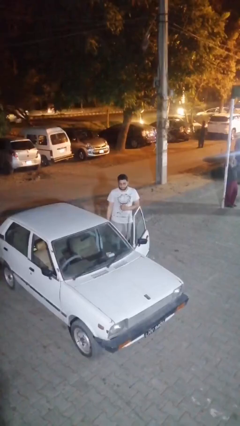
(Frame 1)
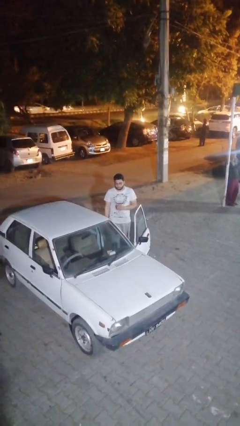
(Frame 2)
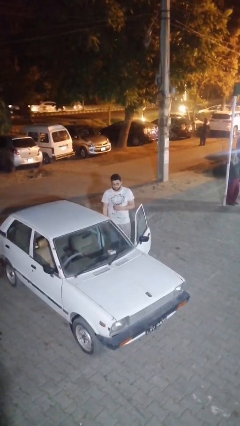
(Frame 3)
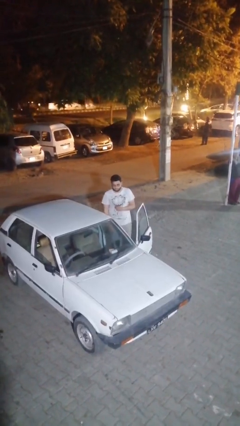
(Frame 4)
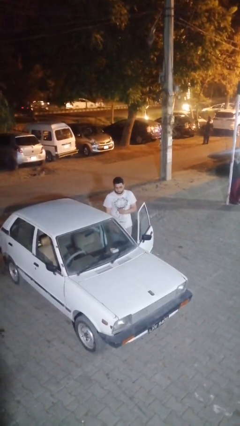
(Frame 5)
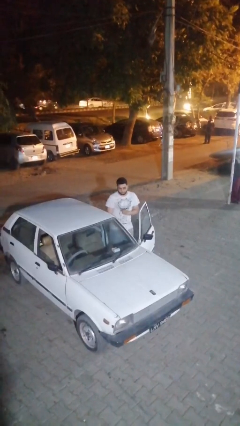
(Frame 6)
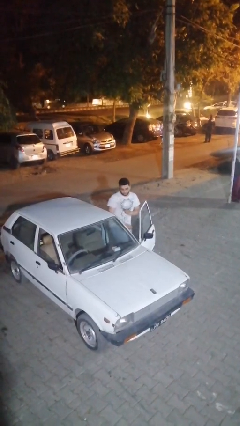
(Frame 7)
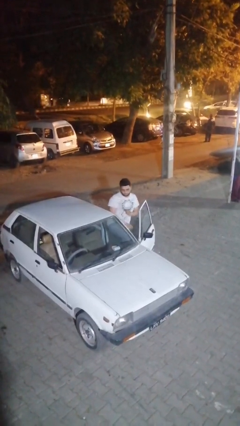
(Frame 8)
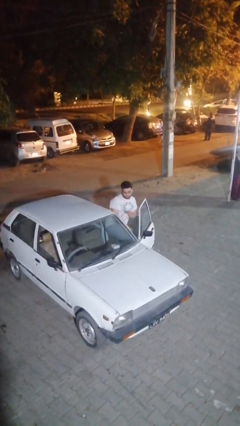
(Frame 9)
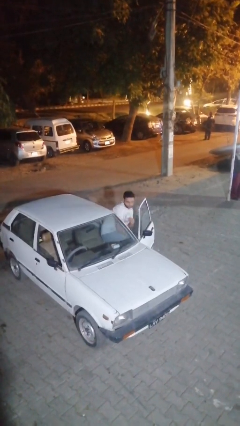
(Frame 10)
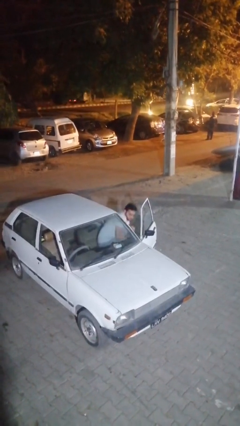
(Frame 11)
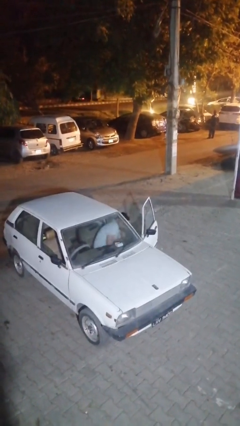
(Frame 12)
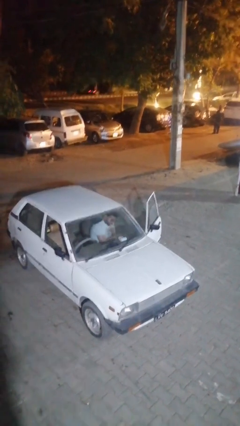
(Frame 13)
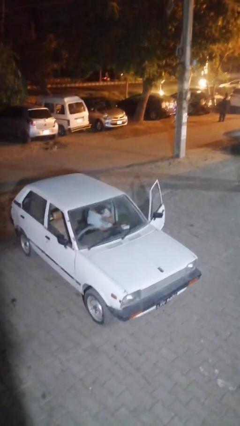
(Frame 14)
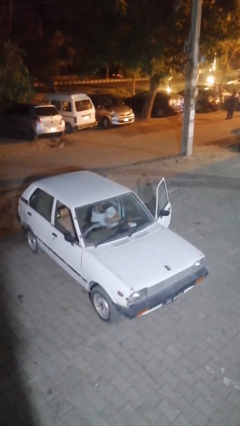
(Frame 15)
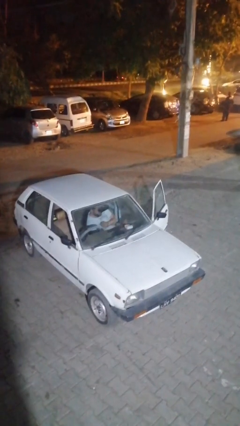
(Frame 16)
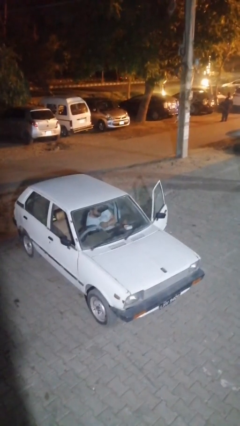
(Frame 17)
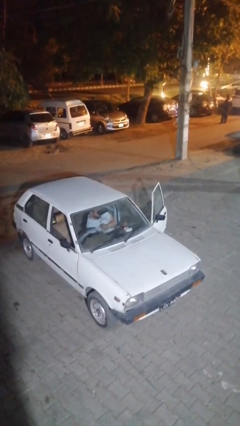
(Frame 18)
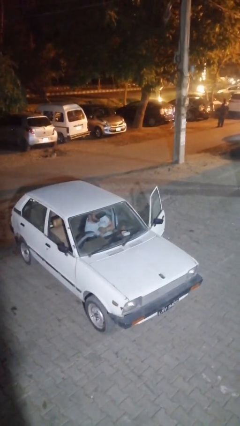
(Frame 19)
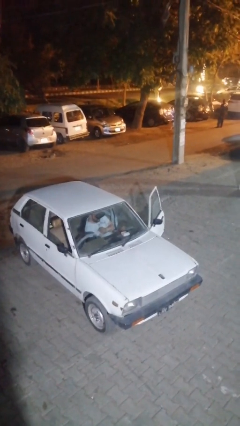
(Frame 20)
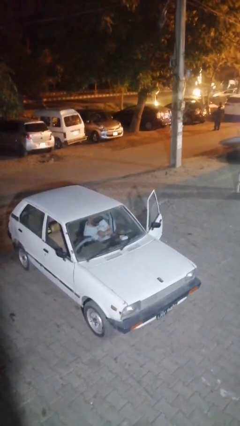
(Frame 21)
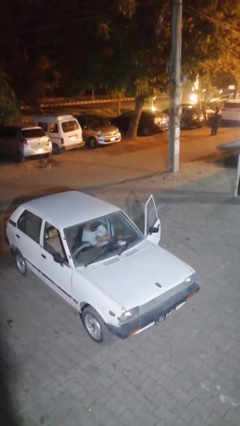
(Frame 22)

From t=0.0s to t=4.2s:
person enters car

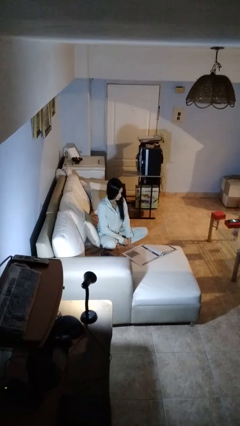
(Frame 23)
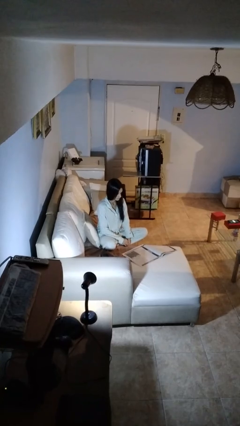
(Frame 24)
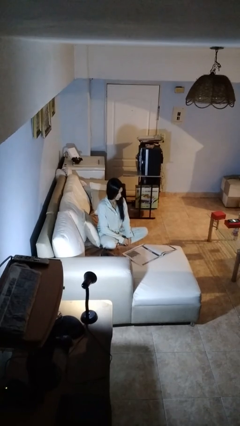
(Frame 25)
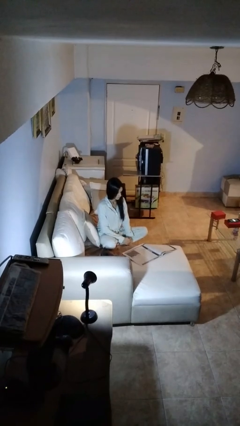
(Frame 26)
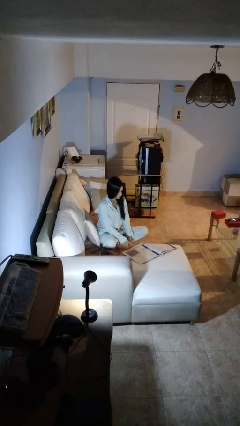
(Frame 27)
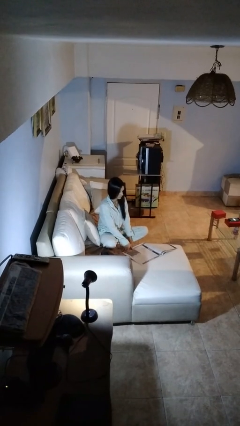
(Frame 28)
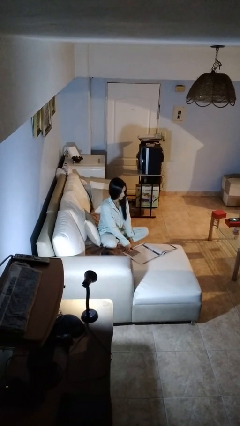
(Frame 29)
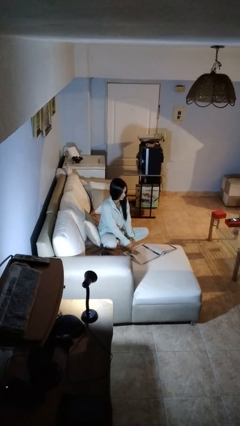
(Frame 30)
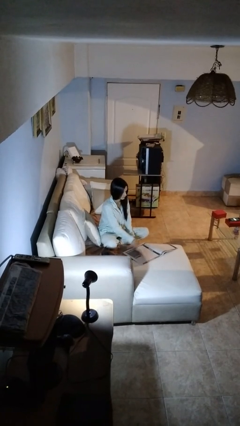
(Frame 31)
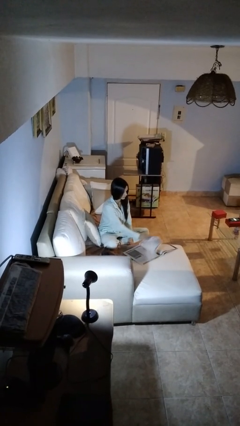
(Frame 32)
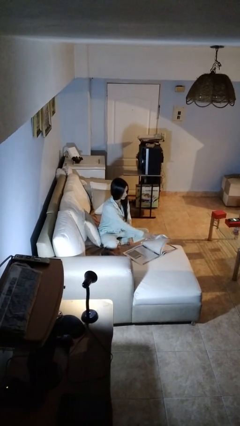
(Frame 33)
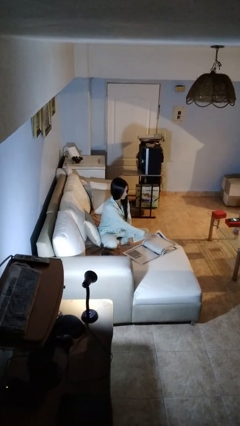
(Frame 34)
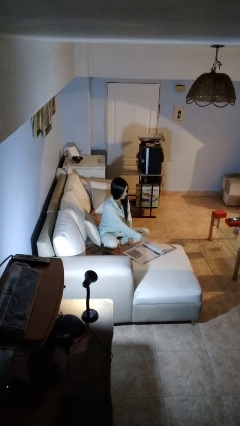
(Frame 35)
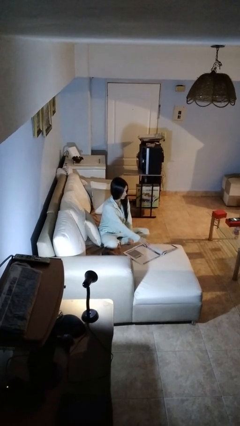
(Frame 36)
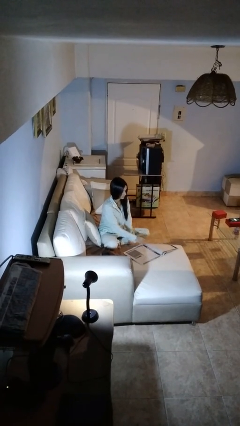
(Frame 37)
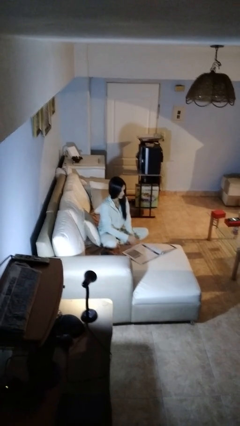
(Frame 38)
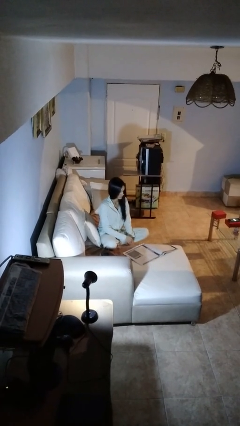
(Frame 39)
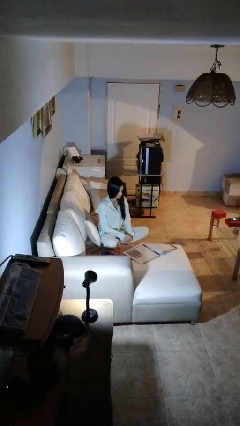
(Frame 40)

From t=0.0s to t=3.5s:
person reads newspaper

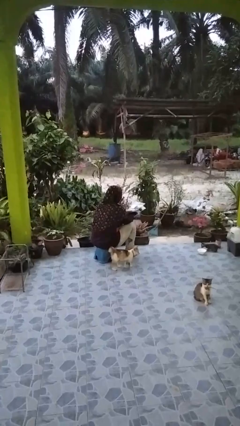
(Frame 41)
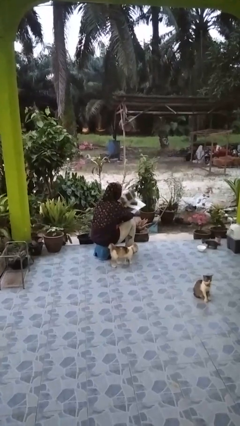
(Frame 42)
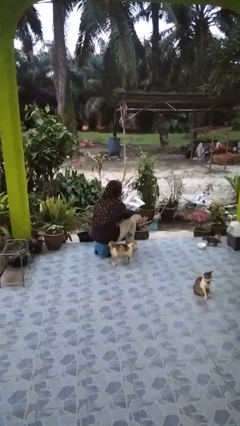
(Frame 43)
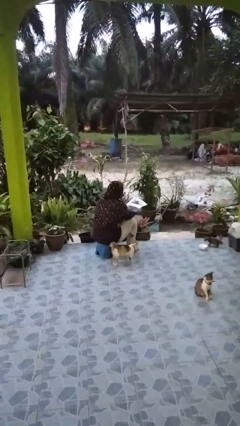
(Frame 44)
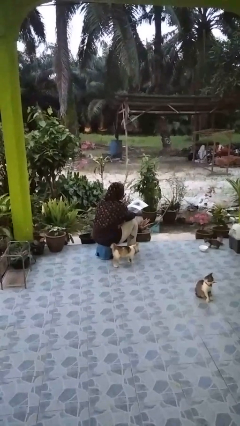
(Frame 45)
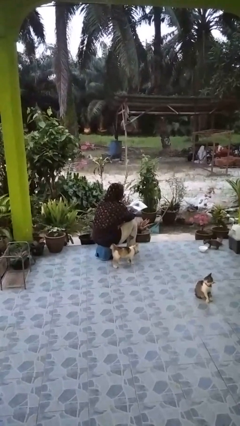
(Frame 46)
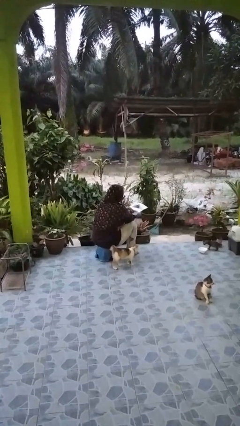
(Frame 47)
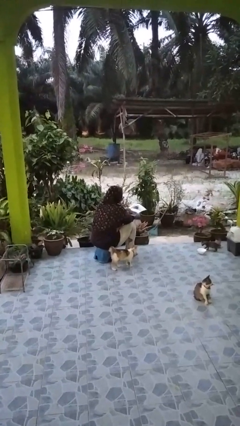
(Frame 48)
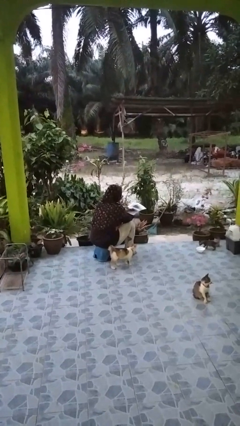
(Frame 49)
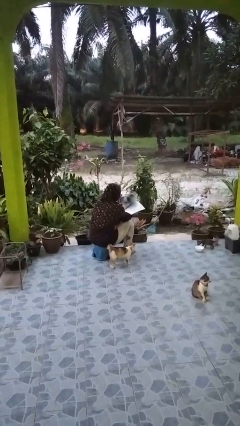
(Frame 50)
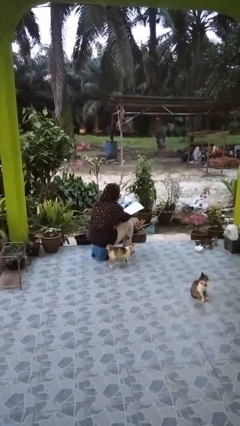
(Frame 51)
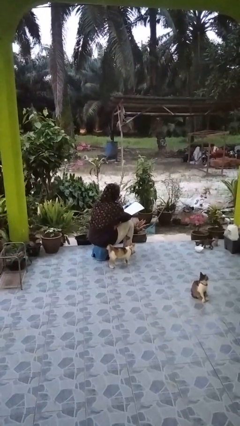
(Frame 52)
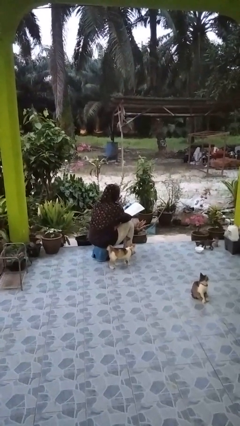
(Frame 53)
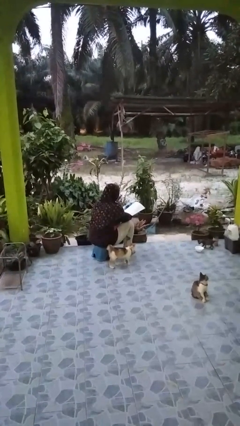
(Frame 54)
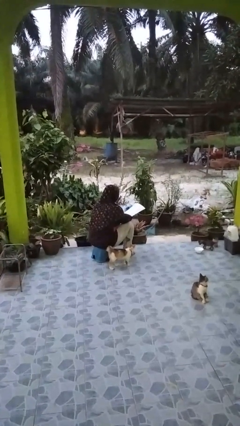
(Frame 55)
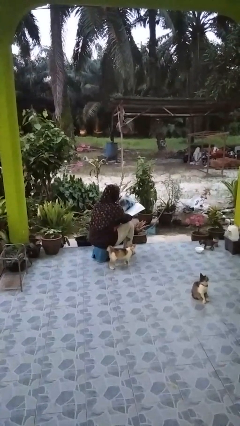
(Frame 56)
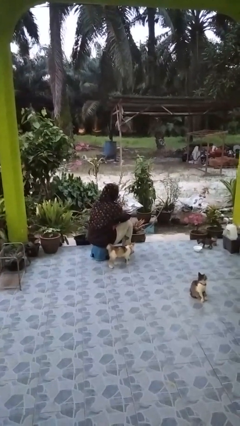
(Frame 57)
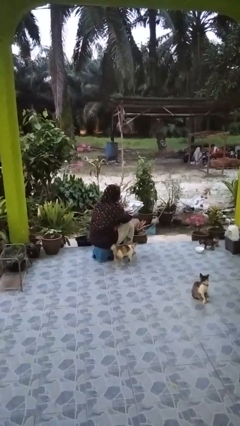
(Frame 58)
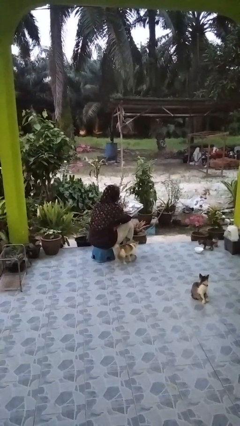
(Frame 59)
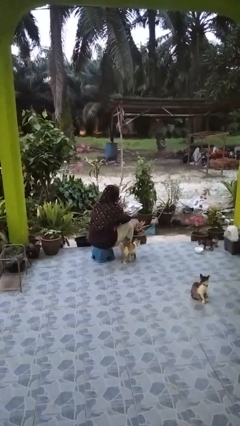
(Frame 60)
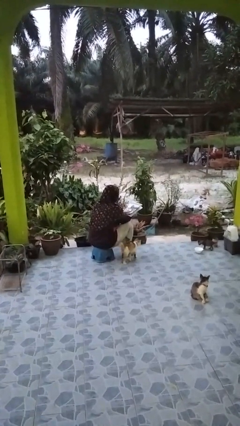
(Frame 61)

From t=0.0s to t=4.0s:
person reads magazine

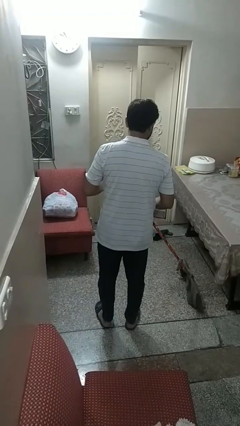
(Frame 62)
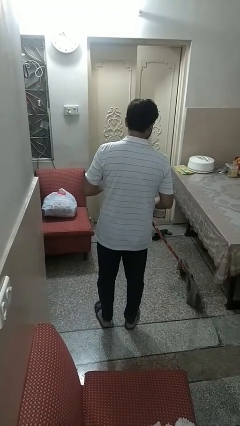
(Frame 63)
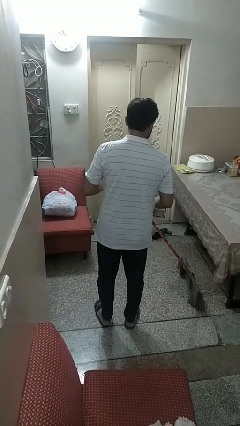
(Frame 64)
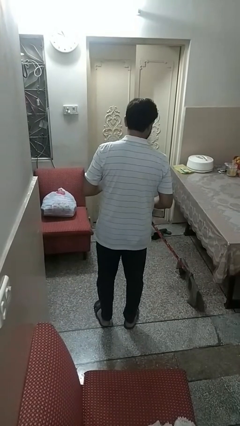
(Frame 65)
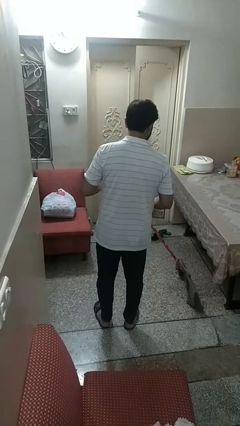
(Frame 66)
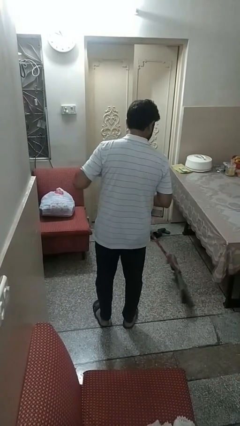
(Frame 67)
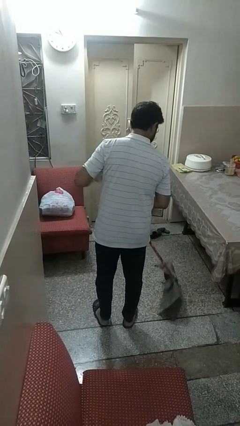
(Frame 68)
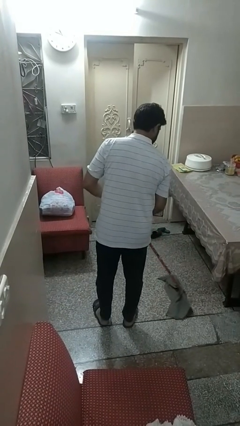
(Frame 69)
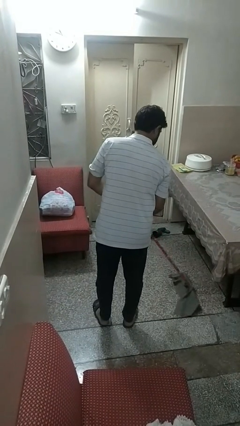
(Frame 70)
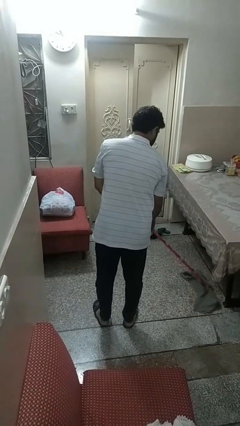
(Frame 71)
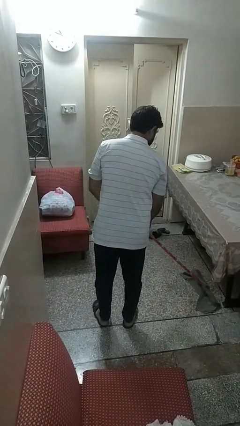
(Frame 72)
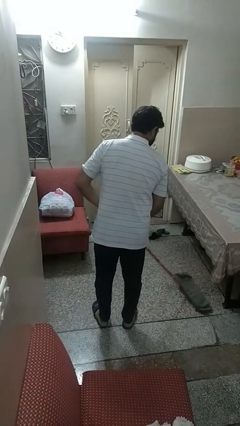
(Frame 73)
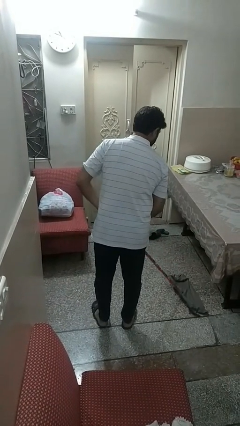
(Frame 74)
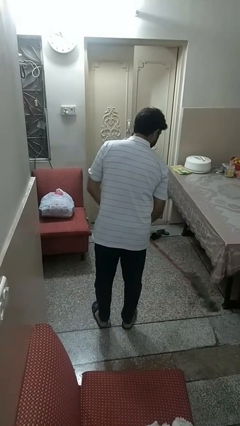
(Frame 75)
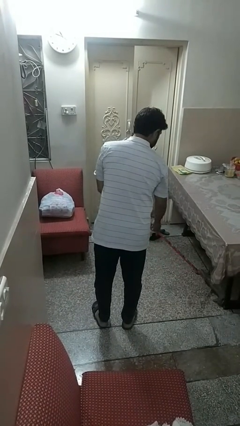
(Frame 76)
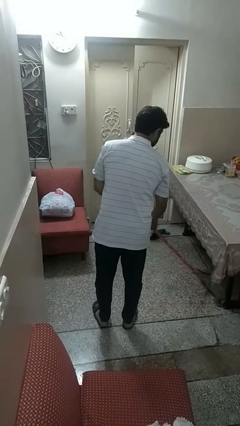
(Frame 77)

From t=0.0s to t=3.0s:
person mops

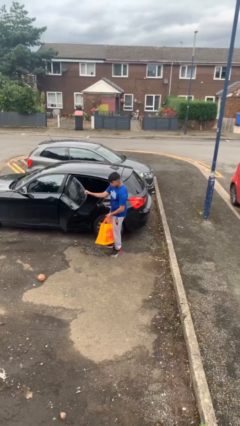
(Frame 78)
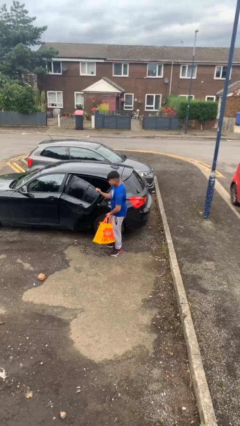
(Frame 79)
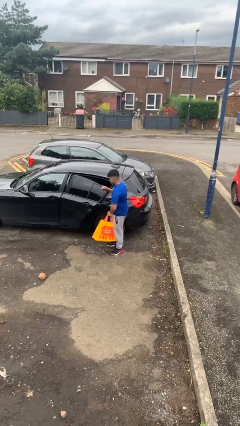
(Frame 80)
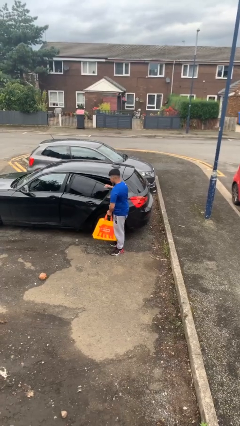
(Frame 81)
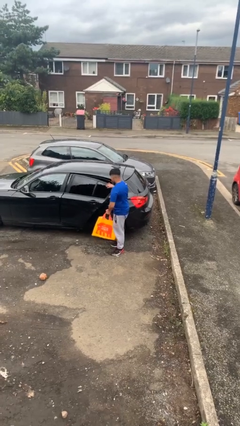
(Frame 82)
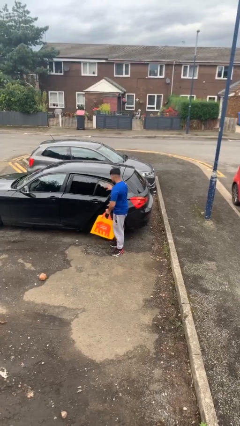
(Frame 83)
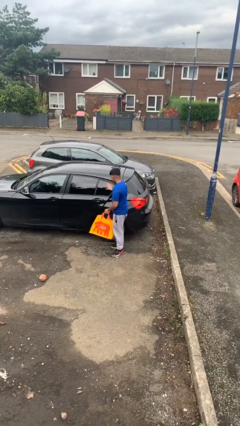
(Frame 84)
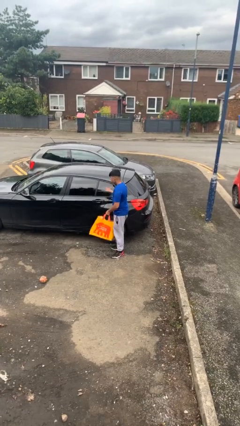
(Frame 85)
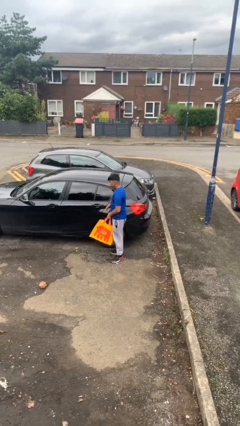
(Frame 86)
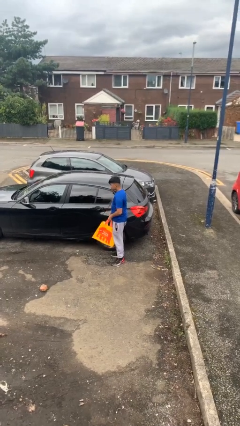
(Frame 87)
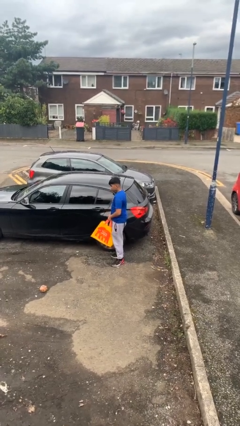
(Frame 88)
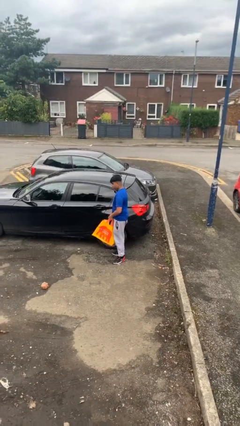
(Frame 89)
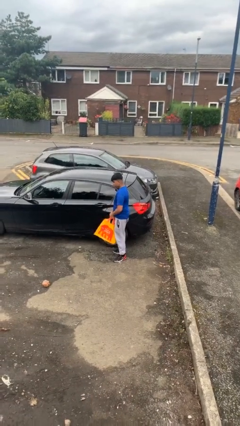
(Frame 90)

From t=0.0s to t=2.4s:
person closes car door

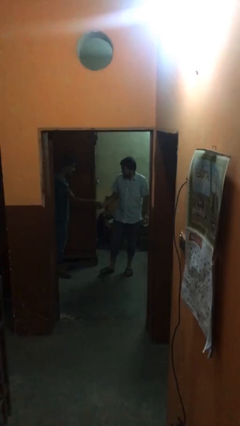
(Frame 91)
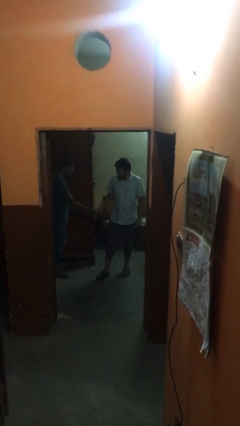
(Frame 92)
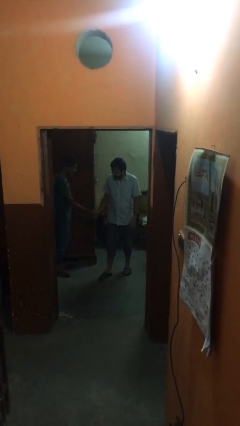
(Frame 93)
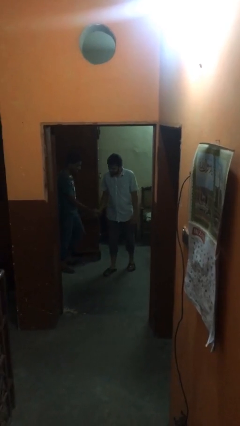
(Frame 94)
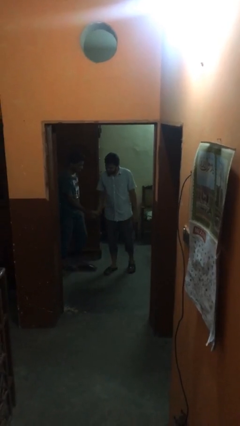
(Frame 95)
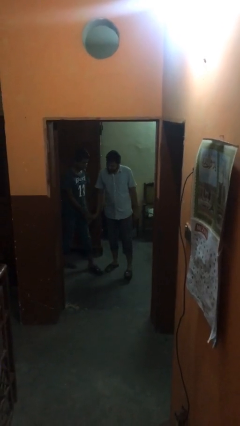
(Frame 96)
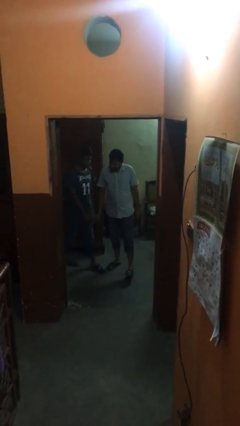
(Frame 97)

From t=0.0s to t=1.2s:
person shakes hand
